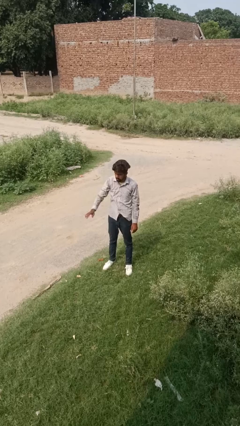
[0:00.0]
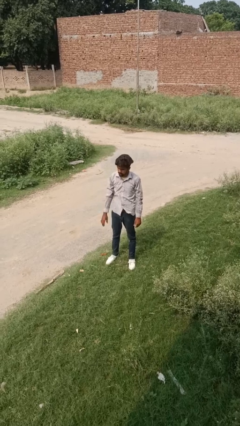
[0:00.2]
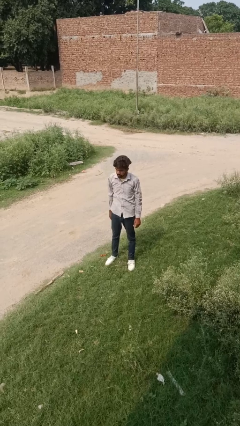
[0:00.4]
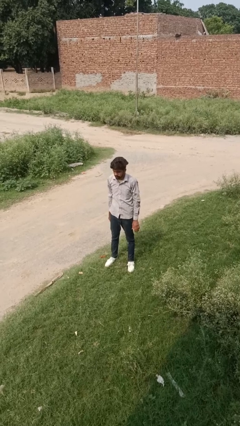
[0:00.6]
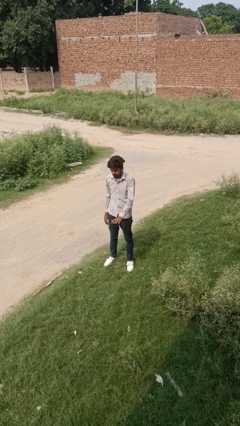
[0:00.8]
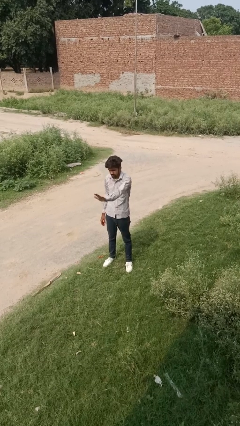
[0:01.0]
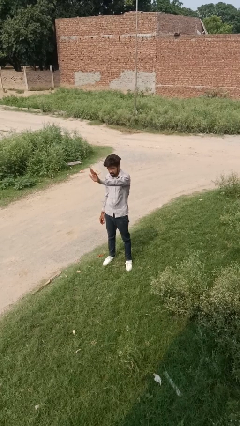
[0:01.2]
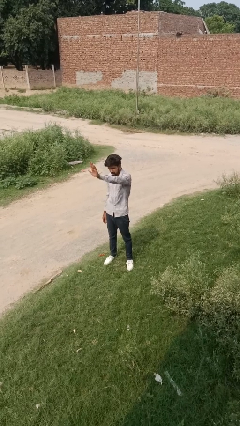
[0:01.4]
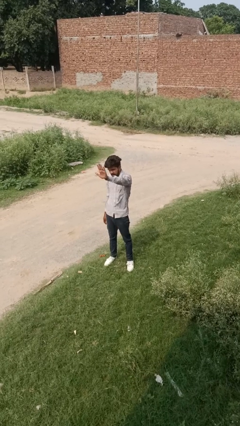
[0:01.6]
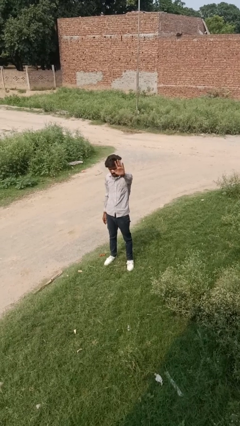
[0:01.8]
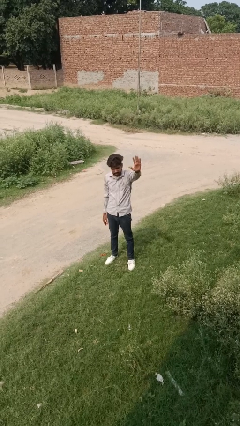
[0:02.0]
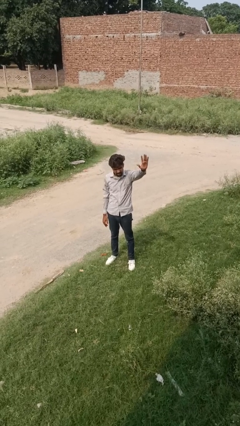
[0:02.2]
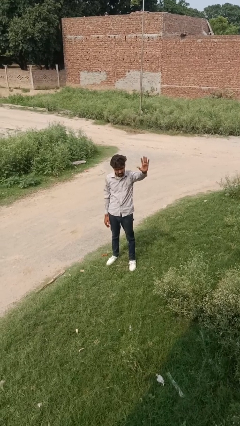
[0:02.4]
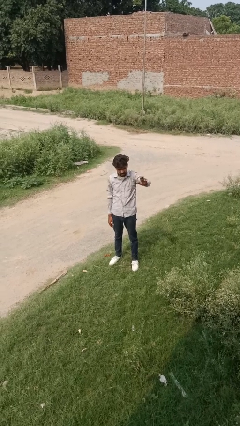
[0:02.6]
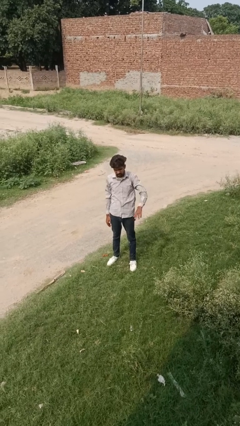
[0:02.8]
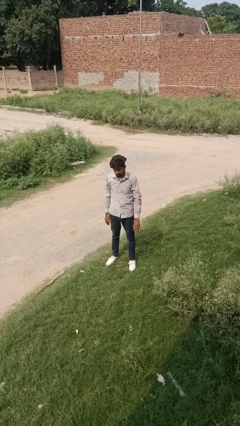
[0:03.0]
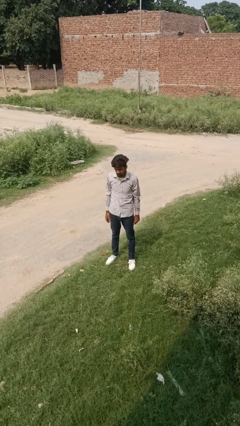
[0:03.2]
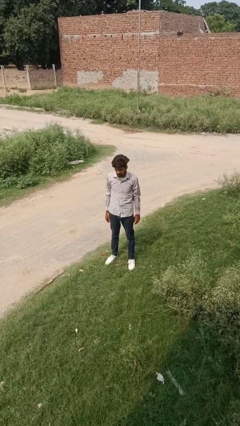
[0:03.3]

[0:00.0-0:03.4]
person gestures swipe left

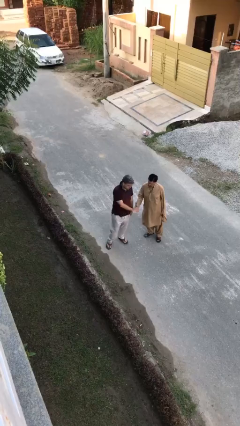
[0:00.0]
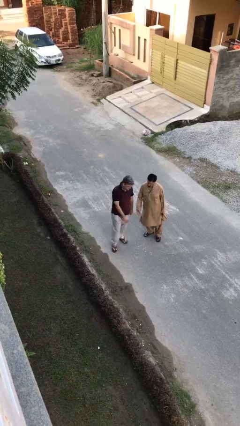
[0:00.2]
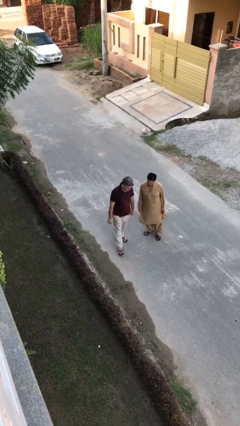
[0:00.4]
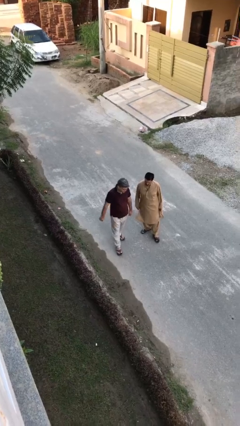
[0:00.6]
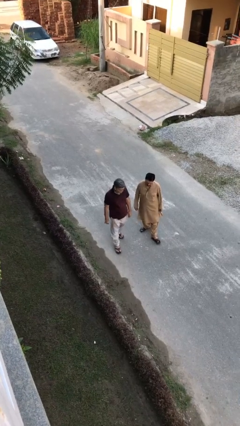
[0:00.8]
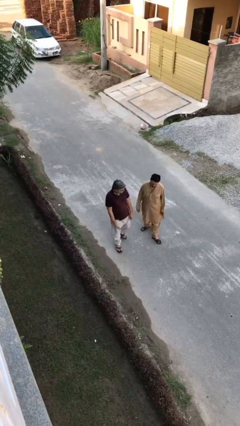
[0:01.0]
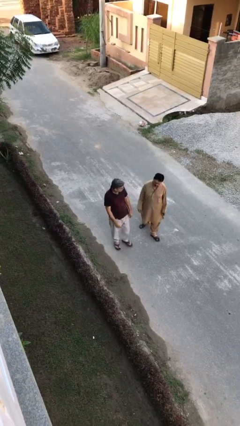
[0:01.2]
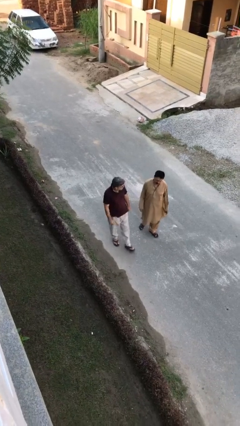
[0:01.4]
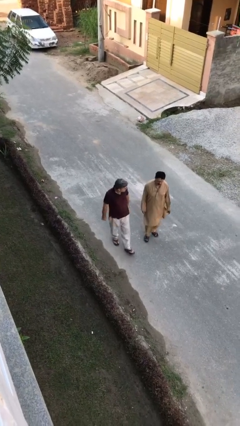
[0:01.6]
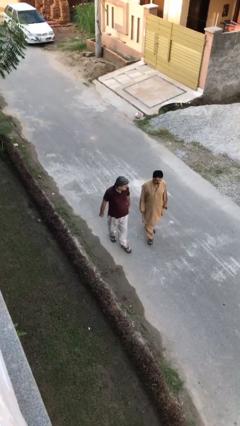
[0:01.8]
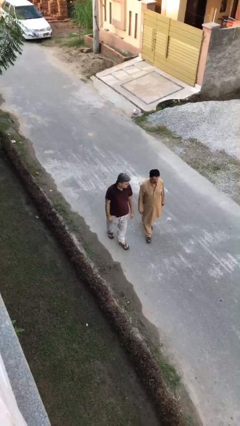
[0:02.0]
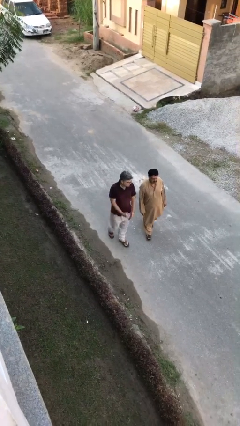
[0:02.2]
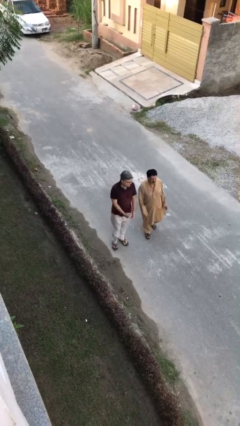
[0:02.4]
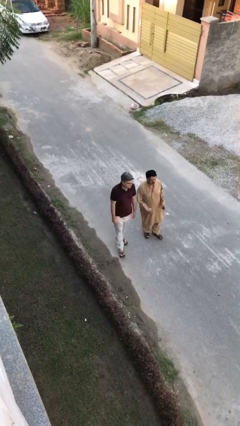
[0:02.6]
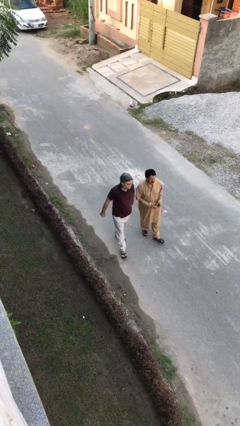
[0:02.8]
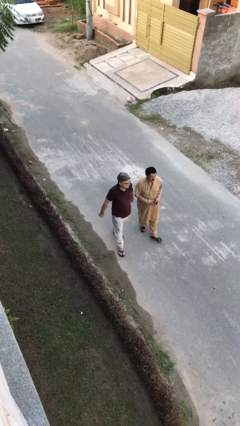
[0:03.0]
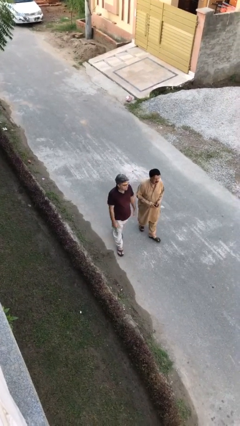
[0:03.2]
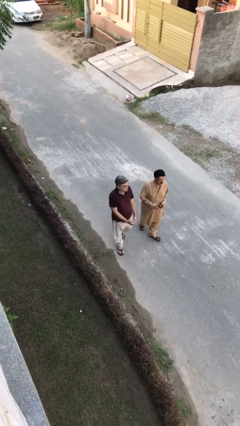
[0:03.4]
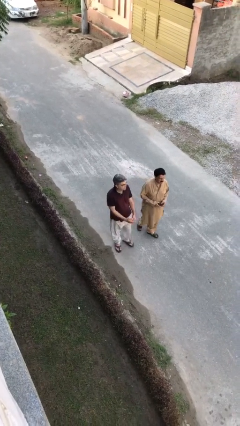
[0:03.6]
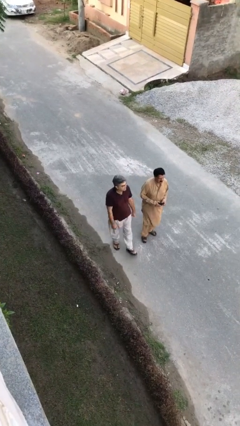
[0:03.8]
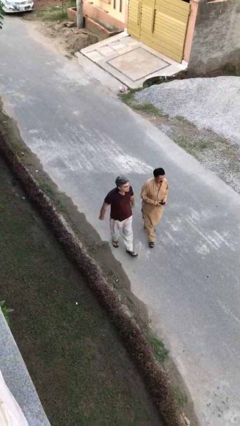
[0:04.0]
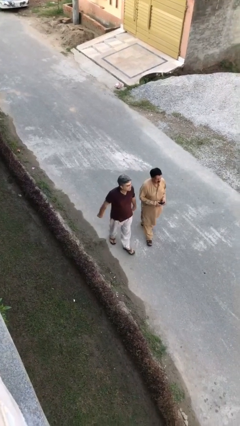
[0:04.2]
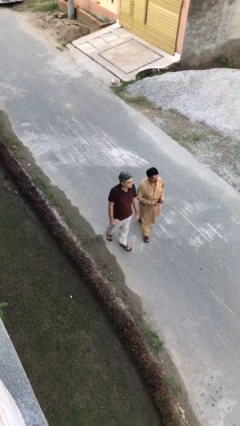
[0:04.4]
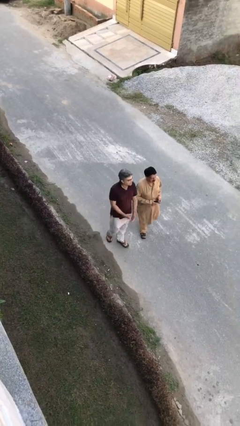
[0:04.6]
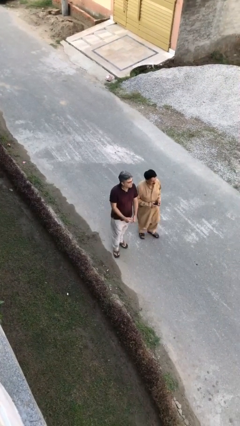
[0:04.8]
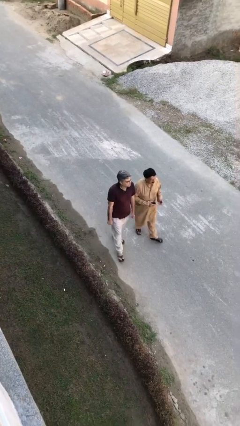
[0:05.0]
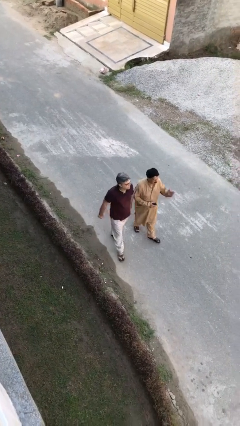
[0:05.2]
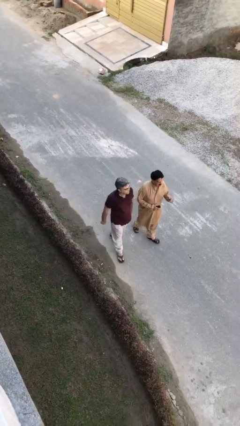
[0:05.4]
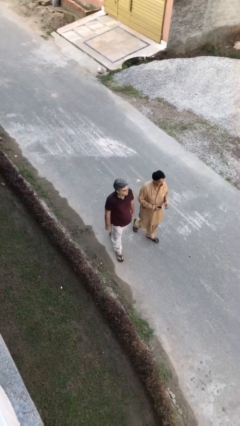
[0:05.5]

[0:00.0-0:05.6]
person talks to person

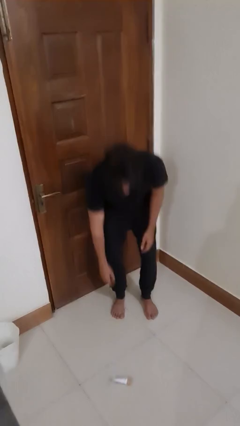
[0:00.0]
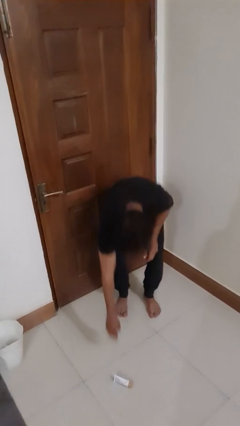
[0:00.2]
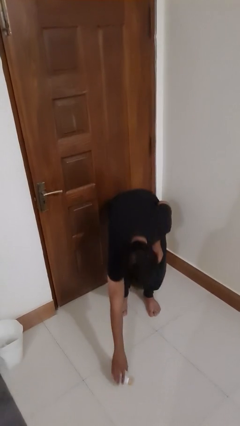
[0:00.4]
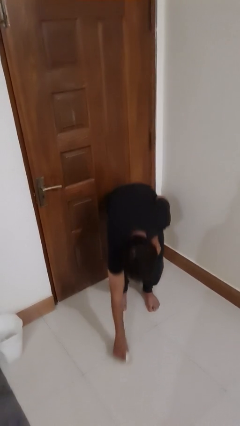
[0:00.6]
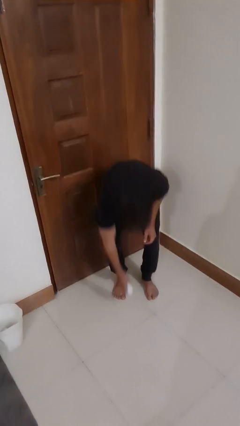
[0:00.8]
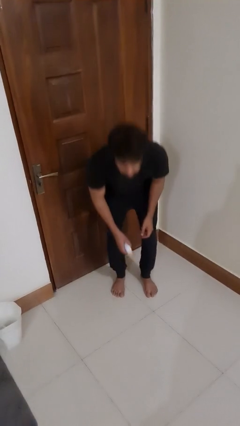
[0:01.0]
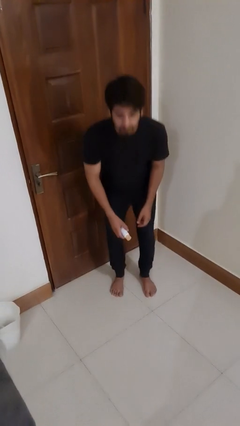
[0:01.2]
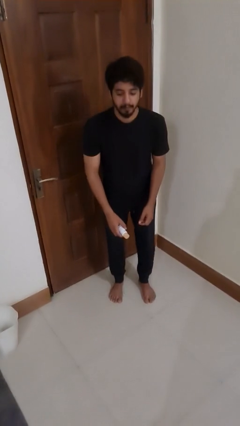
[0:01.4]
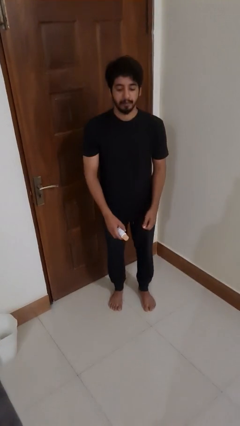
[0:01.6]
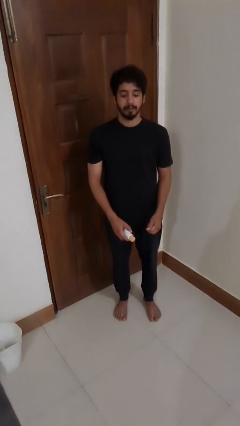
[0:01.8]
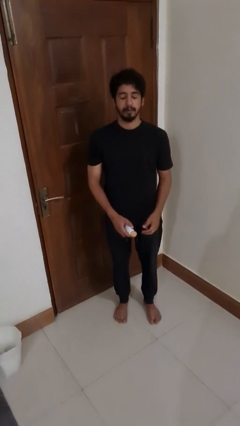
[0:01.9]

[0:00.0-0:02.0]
person picks up object from floor

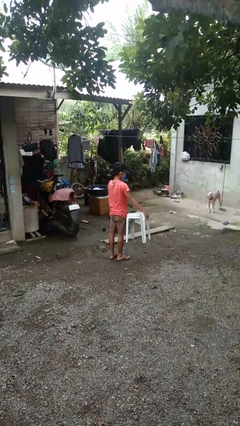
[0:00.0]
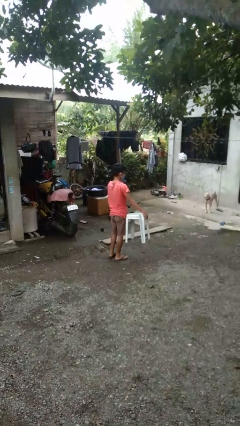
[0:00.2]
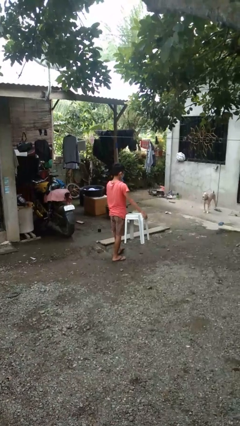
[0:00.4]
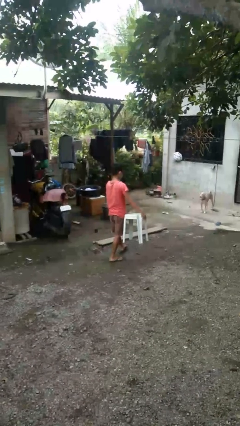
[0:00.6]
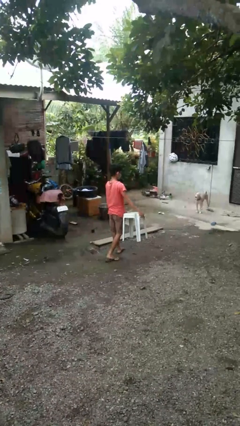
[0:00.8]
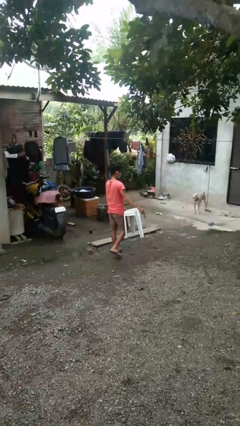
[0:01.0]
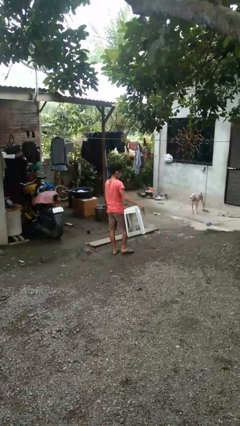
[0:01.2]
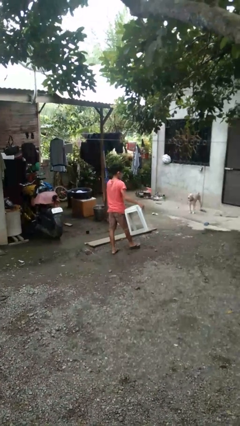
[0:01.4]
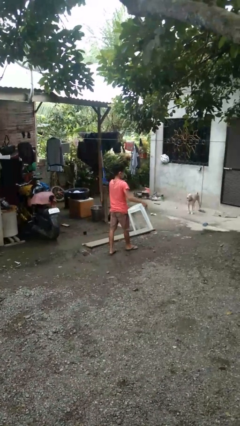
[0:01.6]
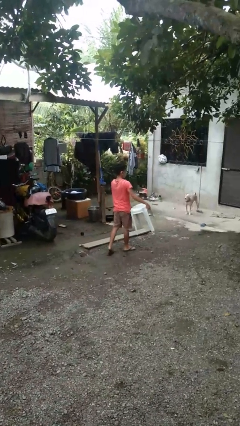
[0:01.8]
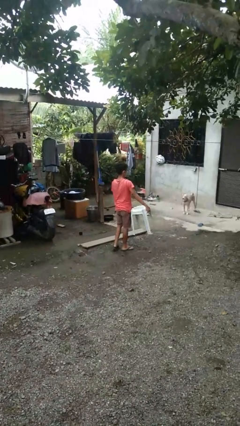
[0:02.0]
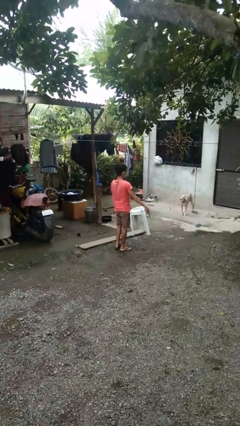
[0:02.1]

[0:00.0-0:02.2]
person carries furniture

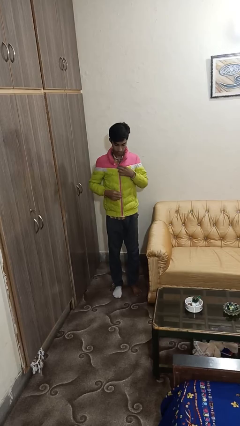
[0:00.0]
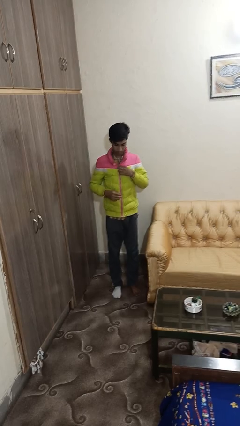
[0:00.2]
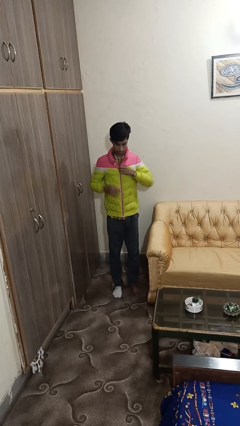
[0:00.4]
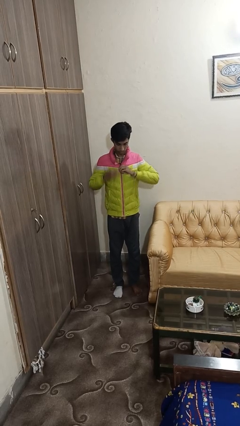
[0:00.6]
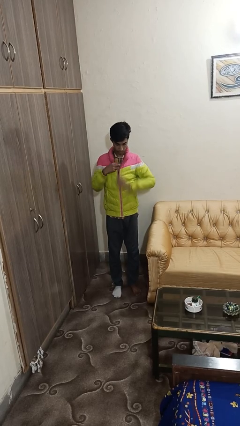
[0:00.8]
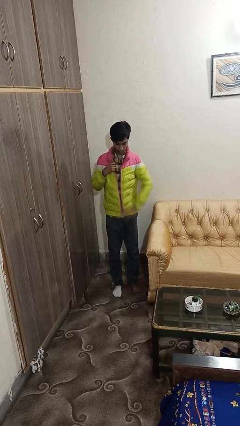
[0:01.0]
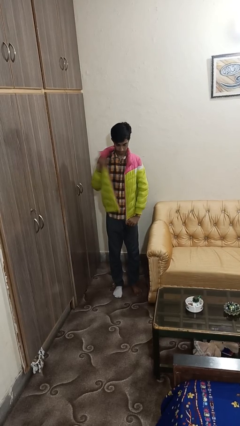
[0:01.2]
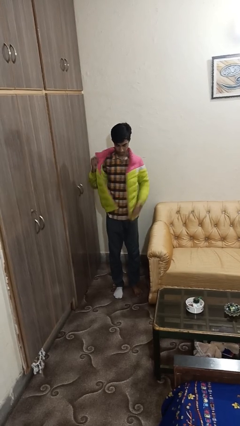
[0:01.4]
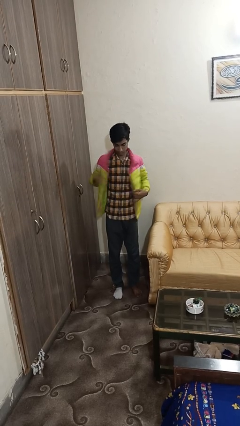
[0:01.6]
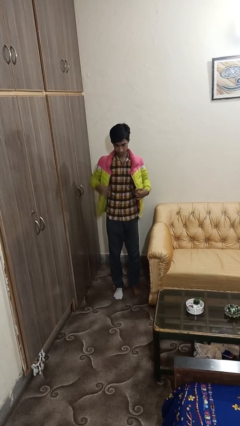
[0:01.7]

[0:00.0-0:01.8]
person unzips jacket

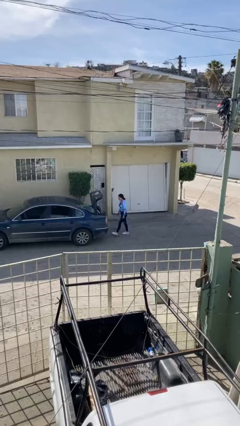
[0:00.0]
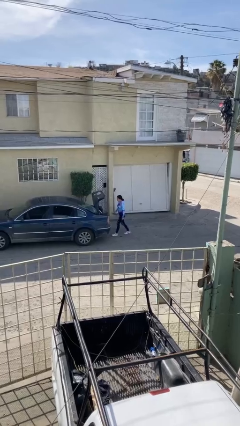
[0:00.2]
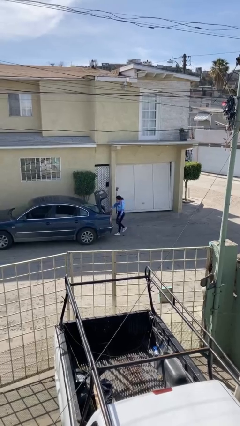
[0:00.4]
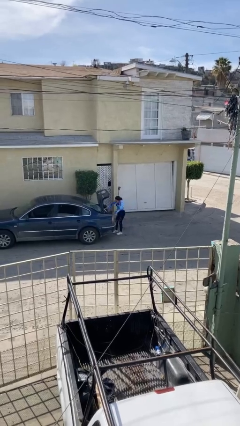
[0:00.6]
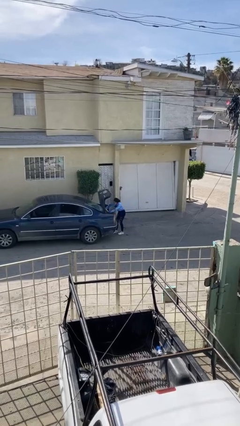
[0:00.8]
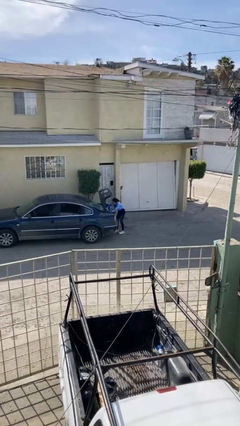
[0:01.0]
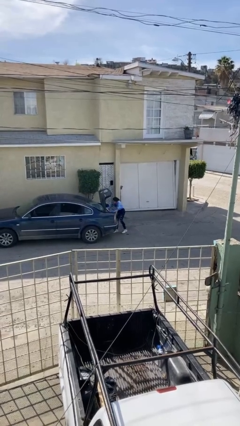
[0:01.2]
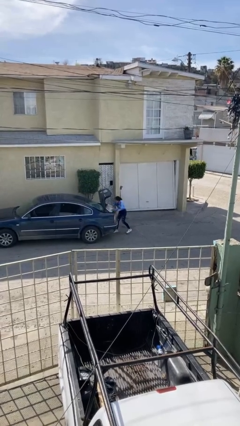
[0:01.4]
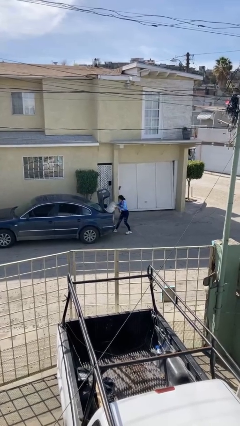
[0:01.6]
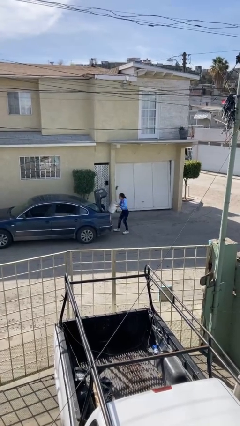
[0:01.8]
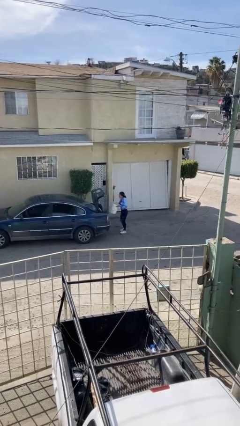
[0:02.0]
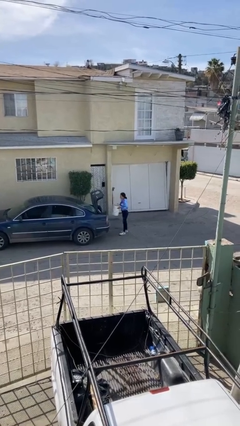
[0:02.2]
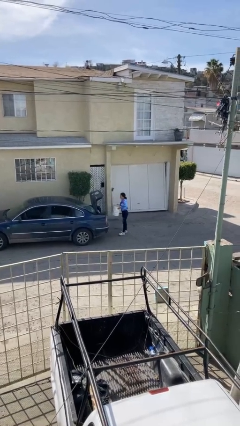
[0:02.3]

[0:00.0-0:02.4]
person unloads car
